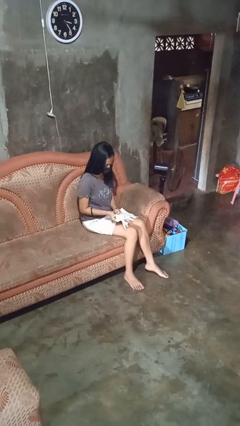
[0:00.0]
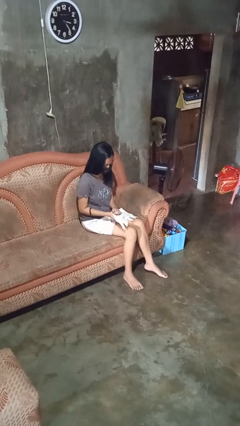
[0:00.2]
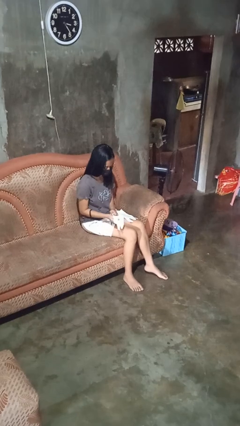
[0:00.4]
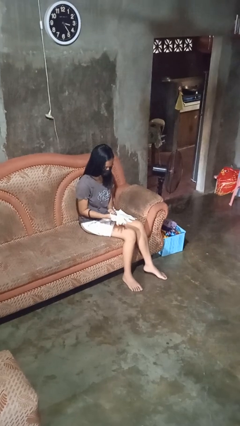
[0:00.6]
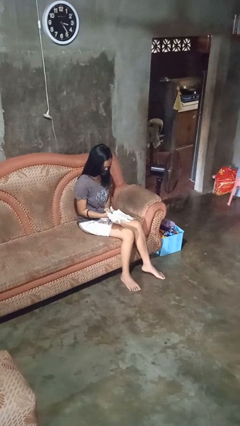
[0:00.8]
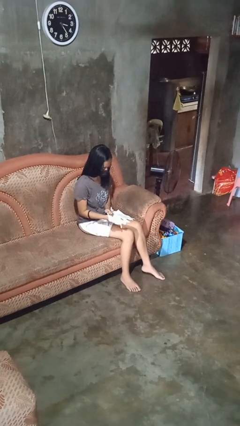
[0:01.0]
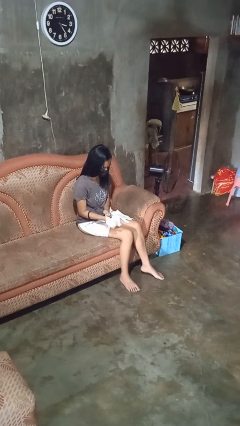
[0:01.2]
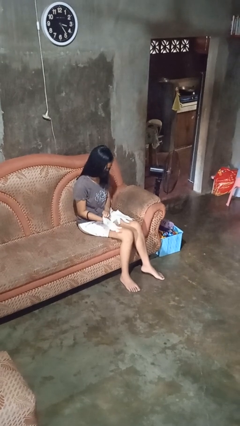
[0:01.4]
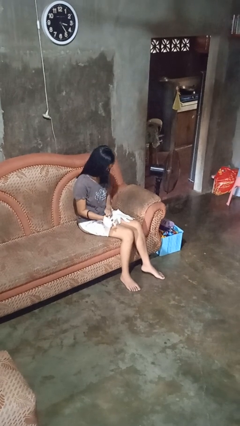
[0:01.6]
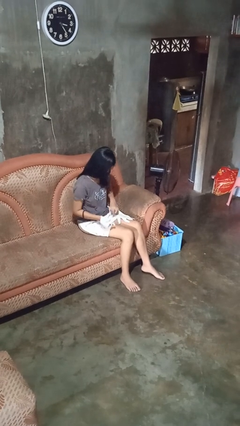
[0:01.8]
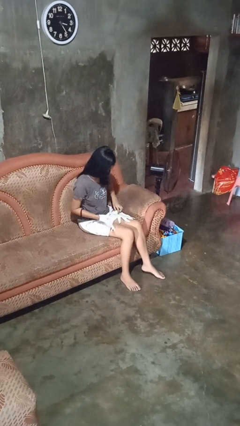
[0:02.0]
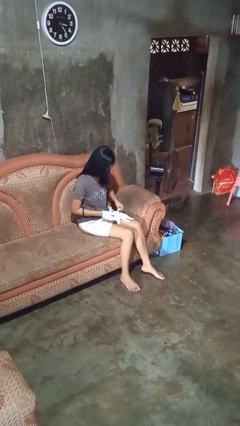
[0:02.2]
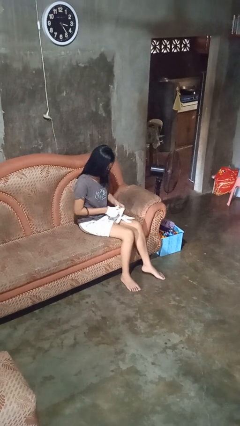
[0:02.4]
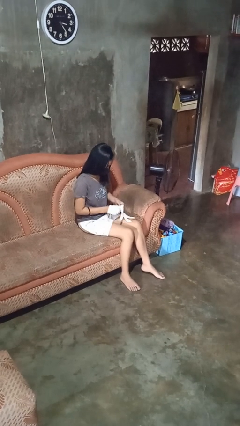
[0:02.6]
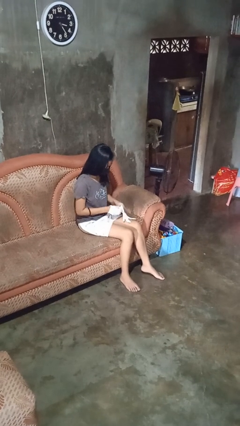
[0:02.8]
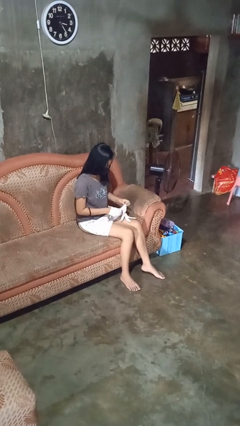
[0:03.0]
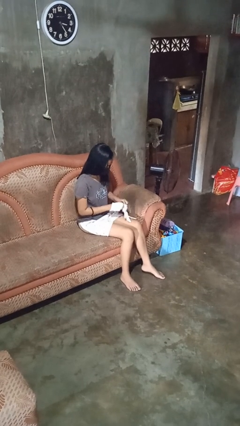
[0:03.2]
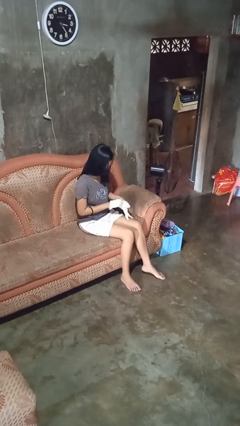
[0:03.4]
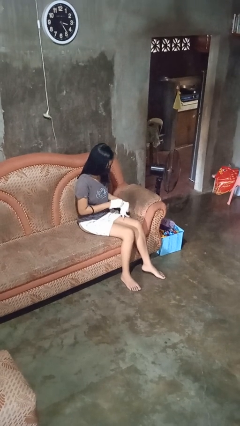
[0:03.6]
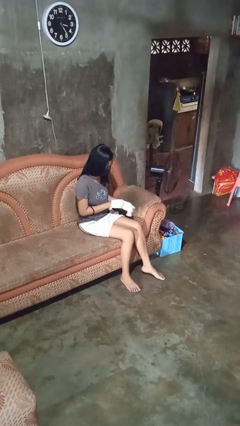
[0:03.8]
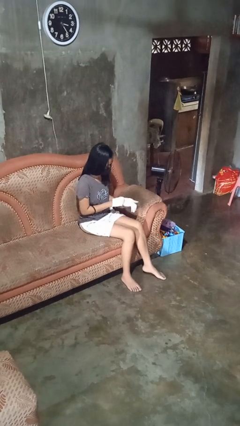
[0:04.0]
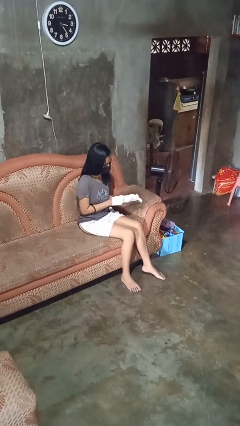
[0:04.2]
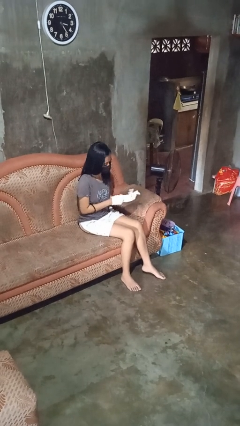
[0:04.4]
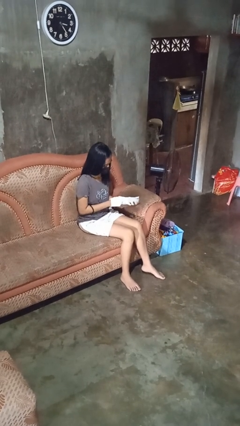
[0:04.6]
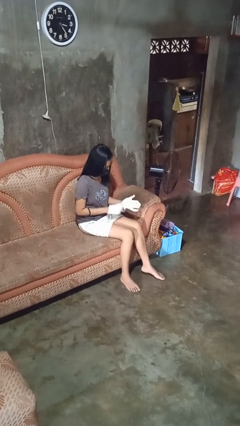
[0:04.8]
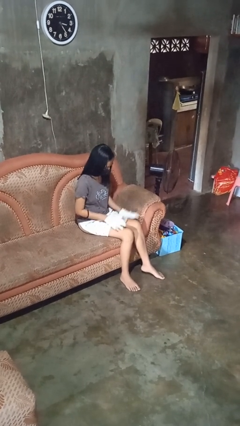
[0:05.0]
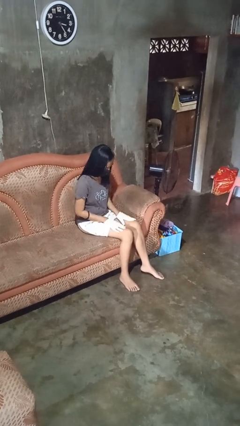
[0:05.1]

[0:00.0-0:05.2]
person puts on gloves

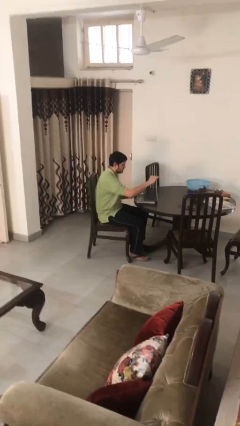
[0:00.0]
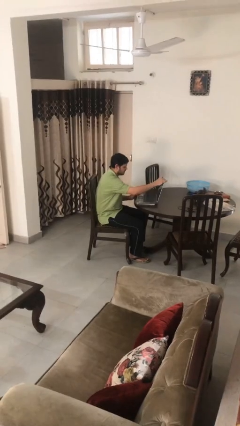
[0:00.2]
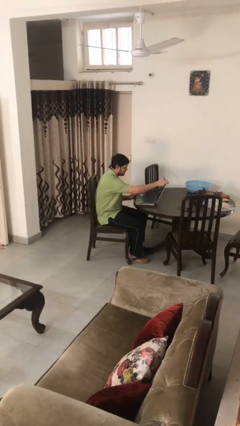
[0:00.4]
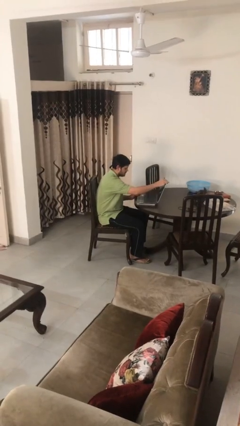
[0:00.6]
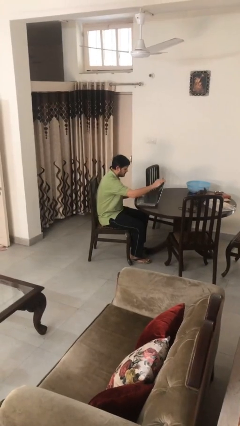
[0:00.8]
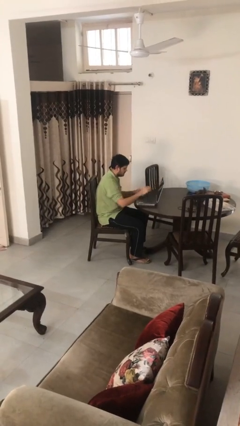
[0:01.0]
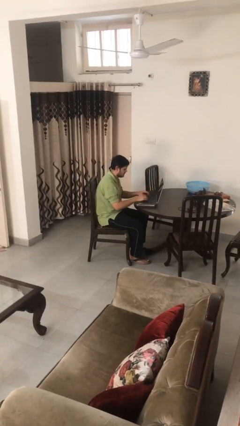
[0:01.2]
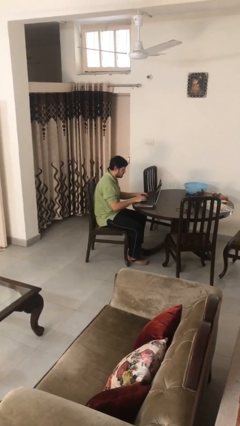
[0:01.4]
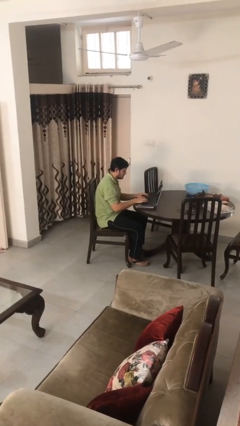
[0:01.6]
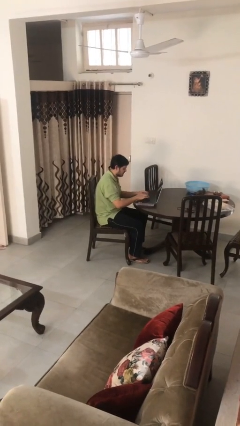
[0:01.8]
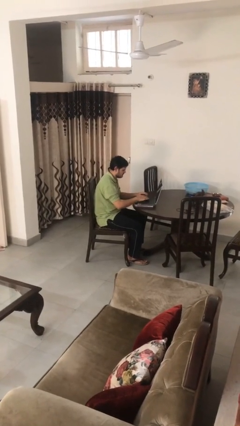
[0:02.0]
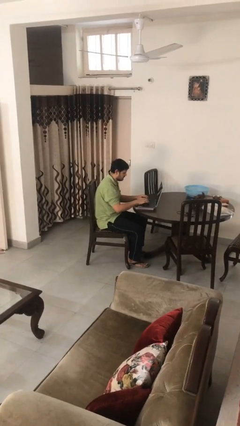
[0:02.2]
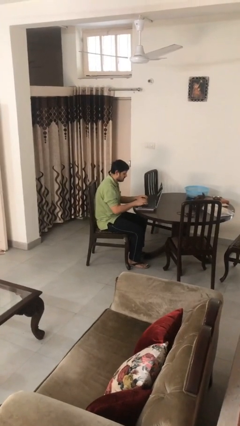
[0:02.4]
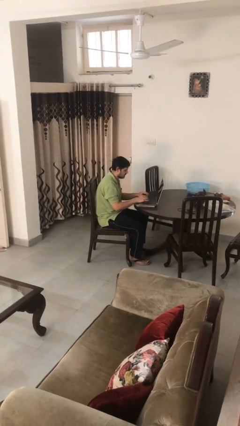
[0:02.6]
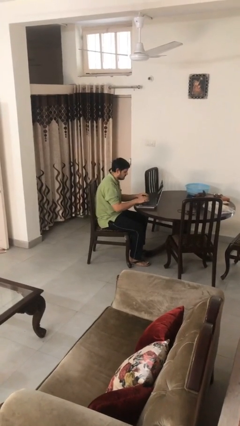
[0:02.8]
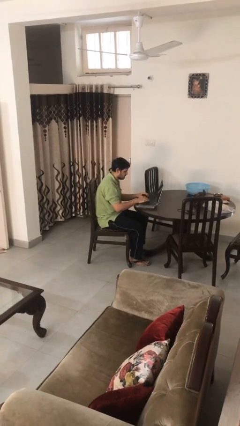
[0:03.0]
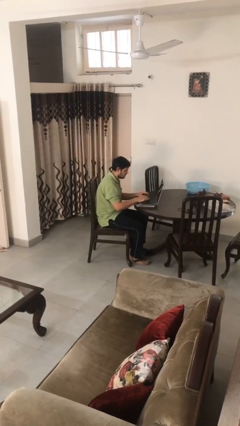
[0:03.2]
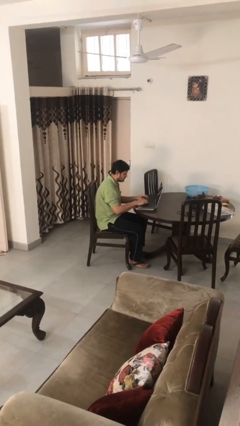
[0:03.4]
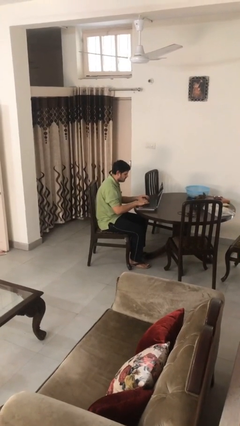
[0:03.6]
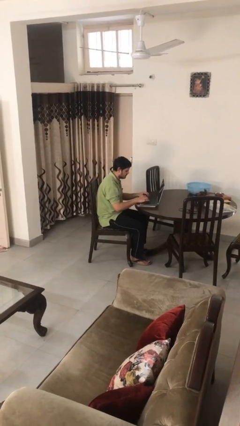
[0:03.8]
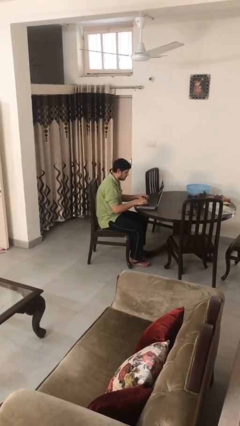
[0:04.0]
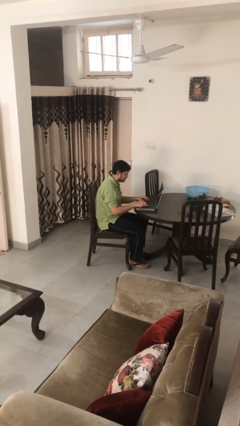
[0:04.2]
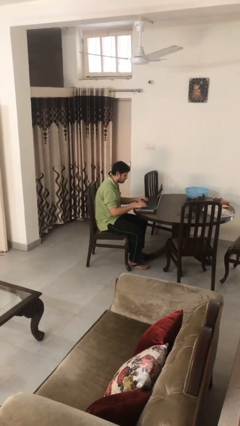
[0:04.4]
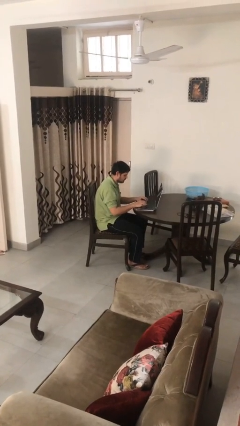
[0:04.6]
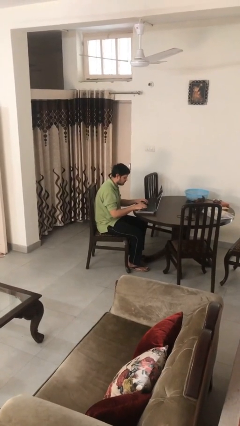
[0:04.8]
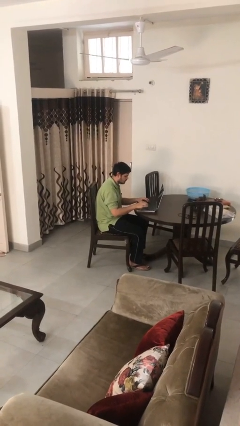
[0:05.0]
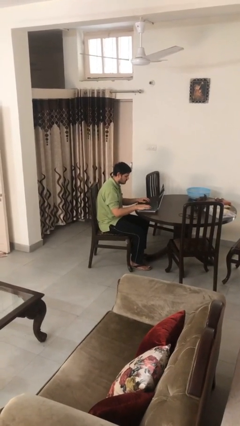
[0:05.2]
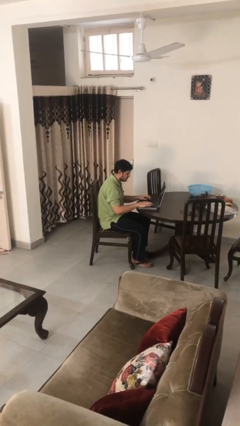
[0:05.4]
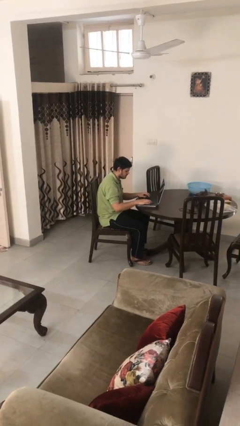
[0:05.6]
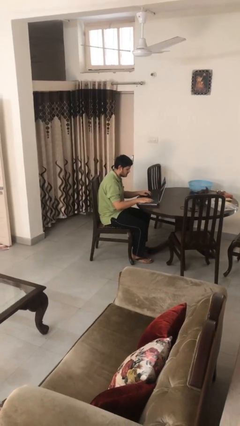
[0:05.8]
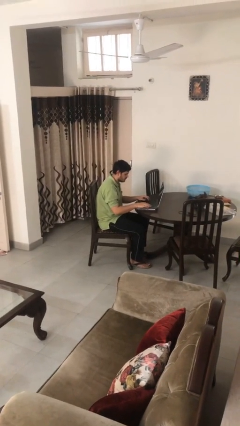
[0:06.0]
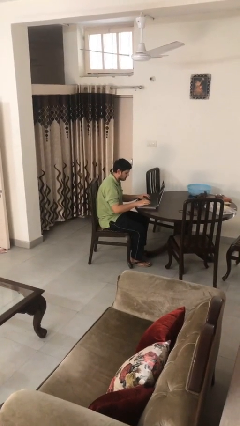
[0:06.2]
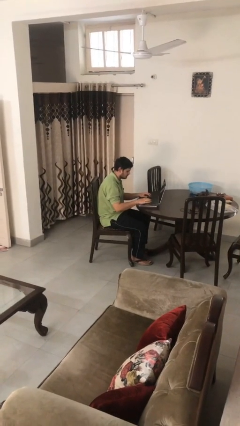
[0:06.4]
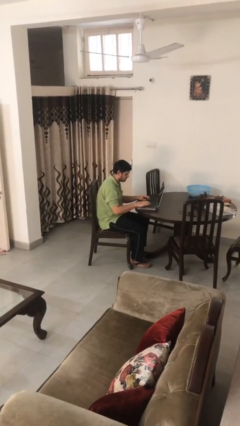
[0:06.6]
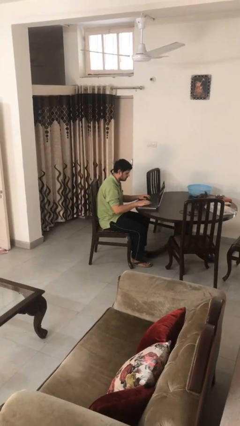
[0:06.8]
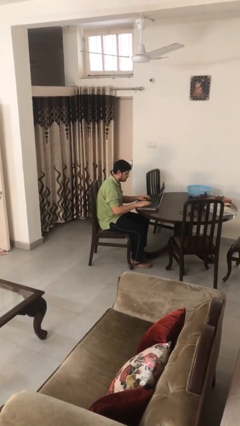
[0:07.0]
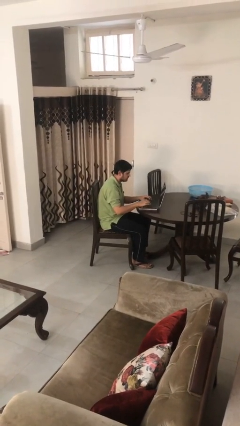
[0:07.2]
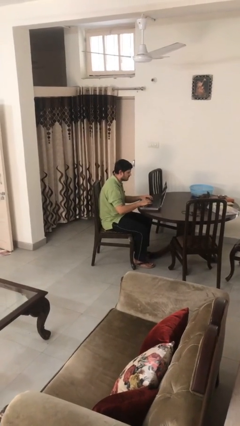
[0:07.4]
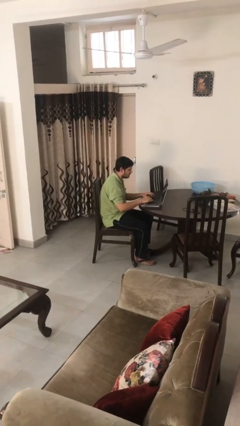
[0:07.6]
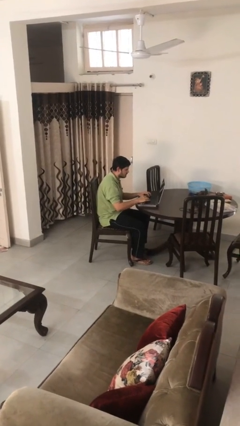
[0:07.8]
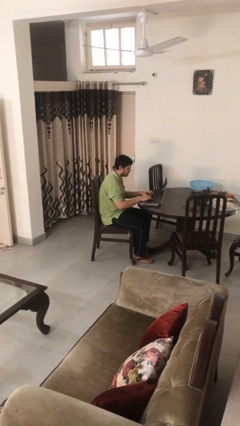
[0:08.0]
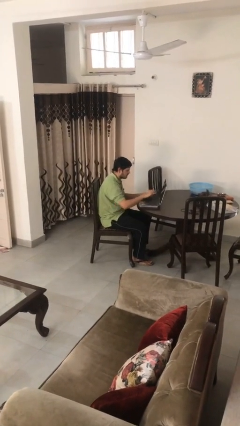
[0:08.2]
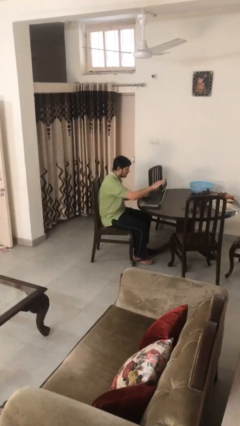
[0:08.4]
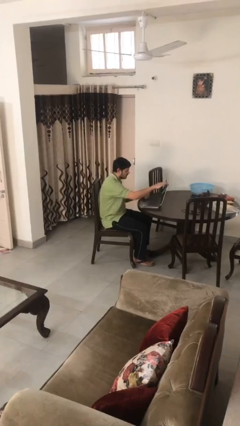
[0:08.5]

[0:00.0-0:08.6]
person interacts with laptop

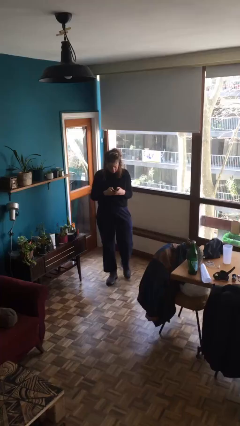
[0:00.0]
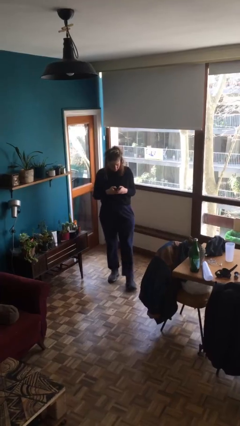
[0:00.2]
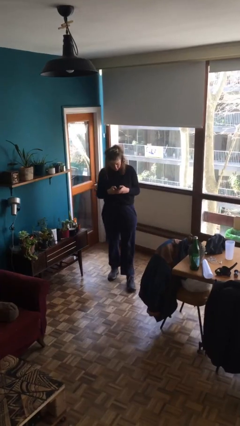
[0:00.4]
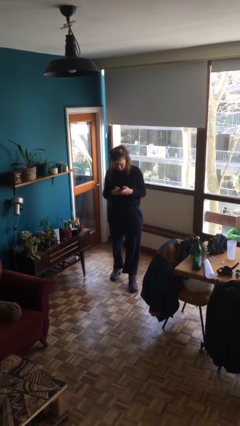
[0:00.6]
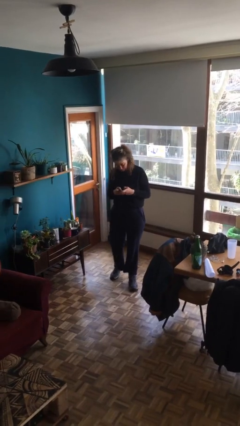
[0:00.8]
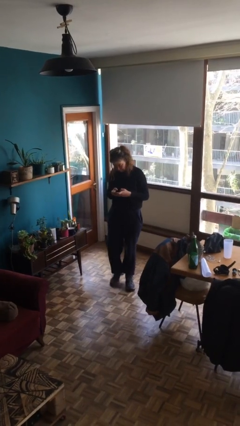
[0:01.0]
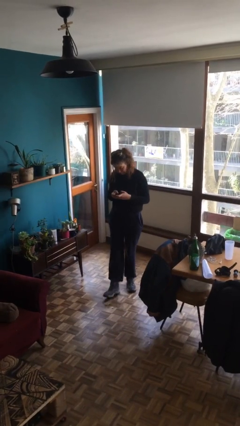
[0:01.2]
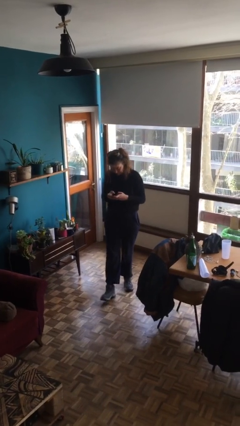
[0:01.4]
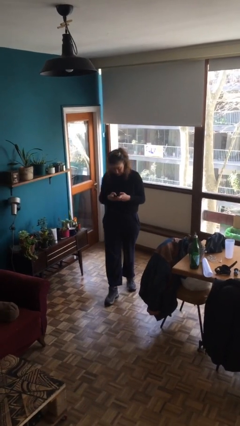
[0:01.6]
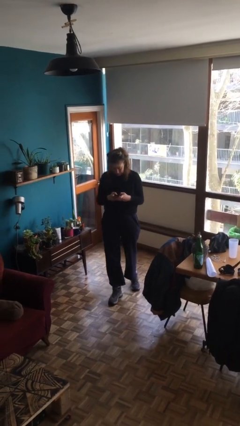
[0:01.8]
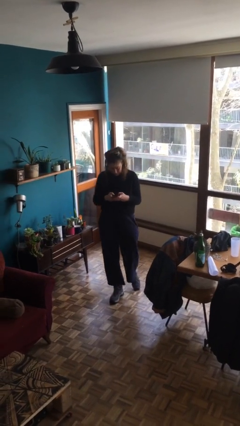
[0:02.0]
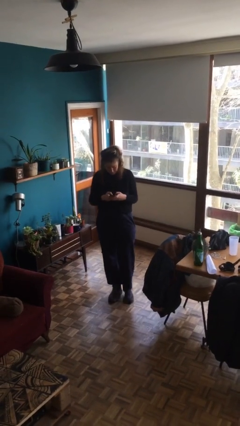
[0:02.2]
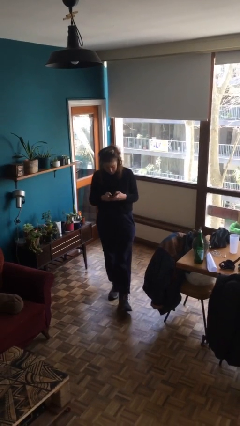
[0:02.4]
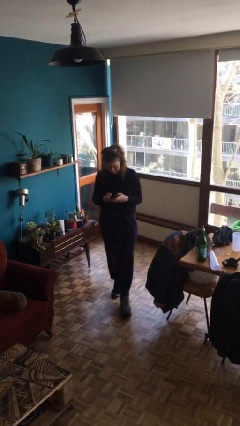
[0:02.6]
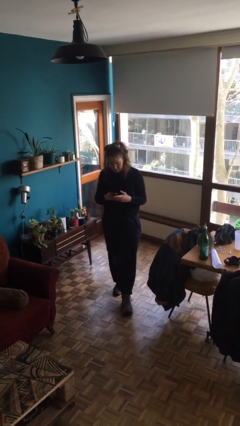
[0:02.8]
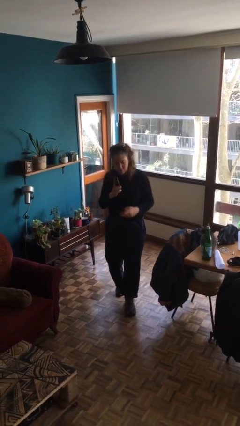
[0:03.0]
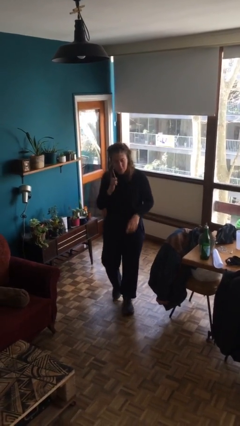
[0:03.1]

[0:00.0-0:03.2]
person texts on phone

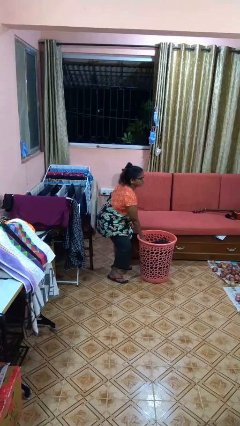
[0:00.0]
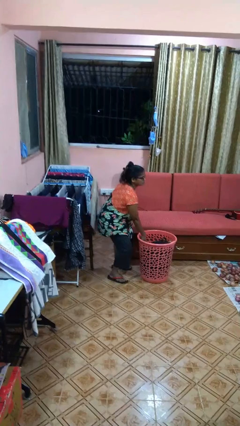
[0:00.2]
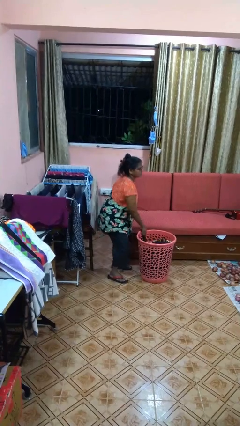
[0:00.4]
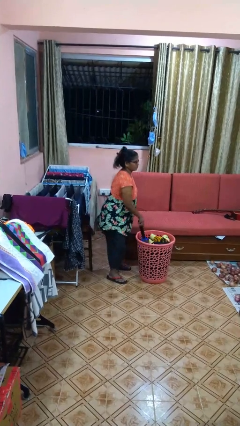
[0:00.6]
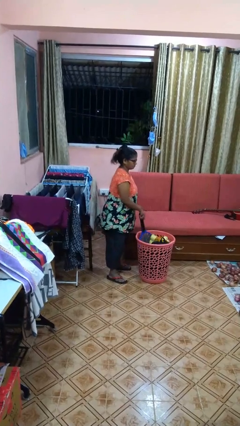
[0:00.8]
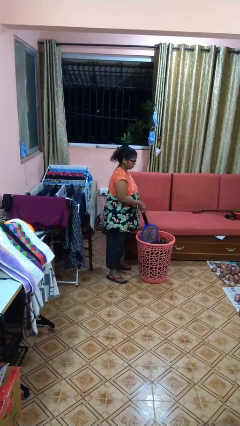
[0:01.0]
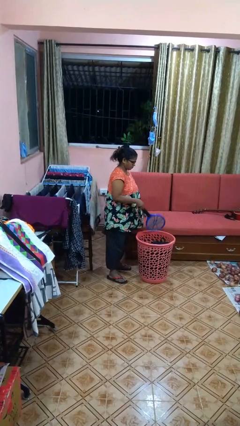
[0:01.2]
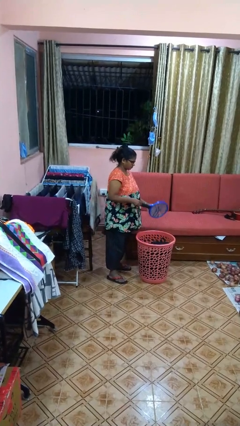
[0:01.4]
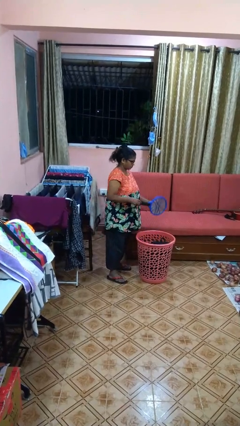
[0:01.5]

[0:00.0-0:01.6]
person takes object from basket
